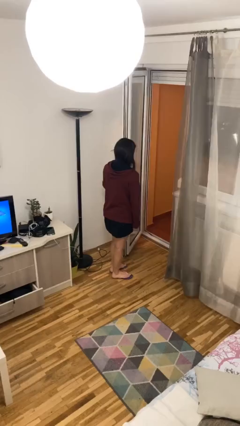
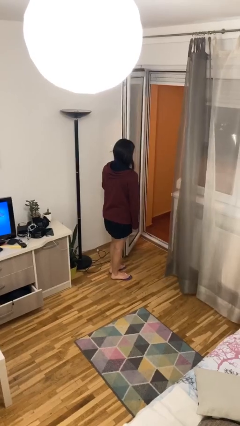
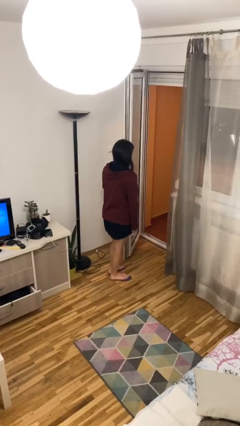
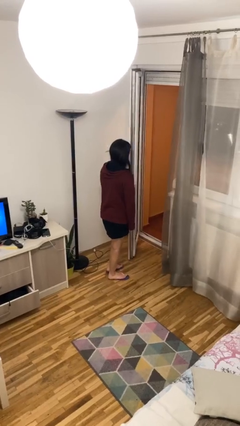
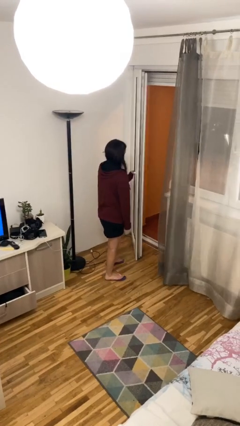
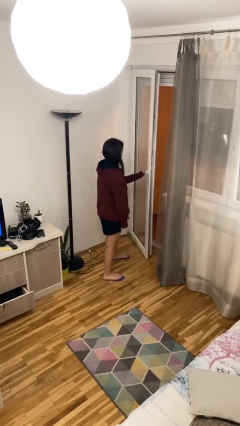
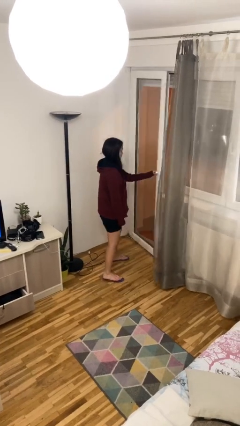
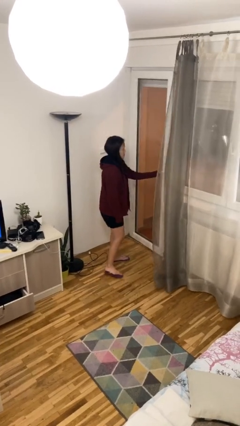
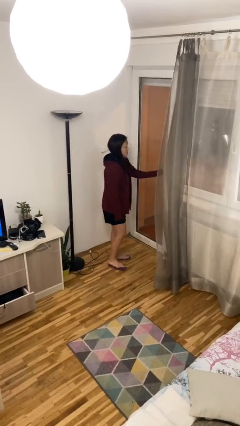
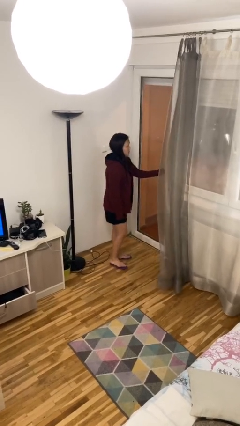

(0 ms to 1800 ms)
person closes facility door

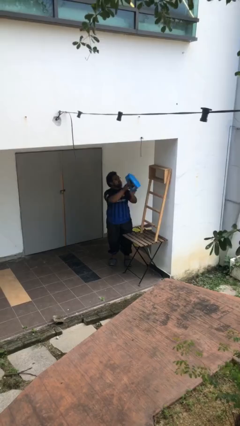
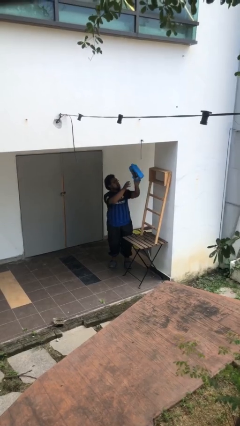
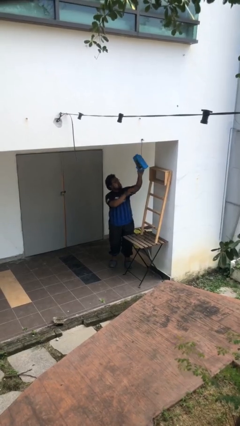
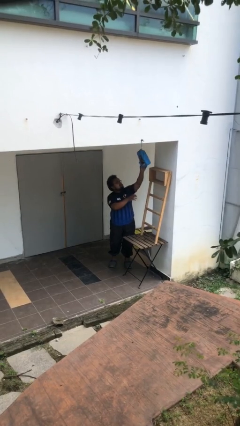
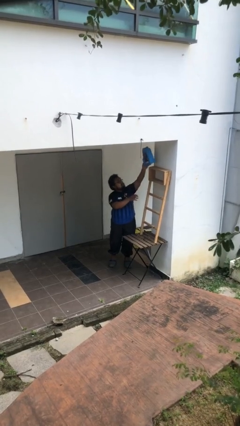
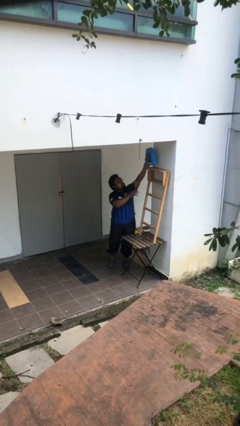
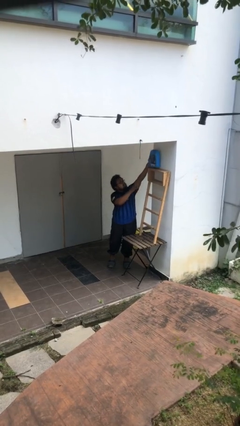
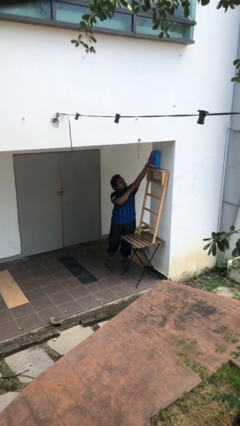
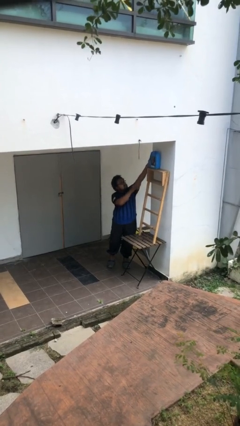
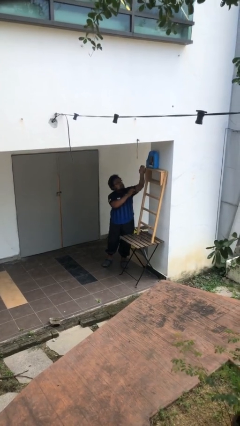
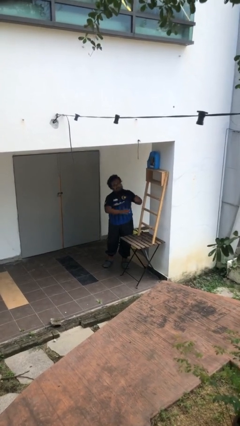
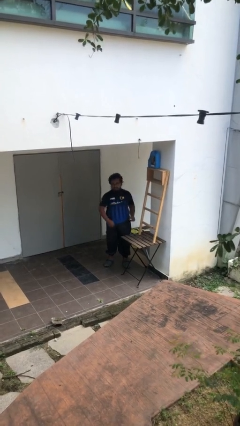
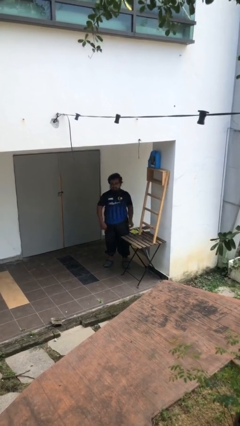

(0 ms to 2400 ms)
person puts down object on shelf

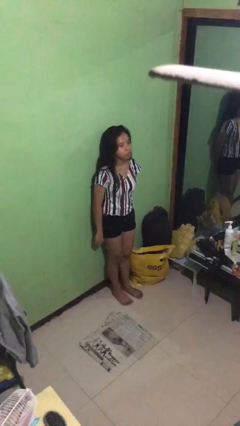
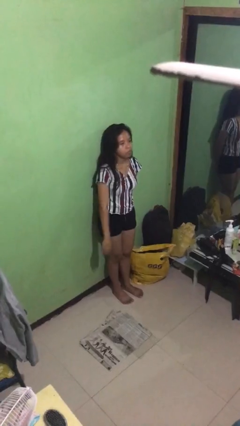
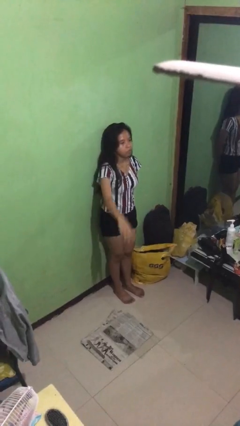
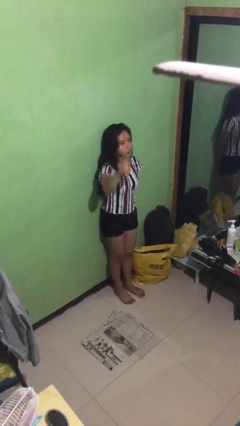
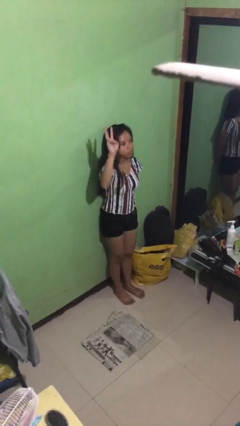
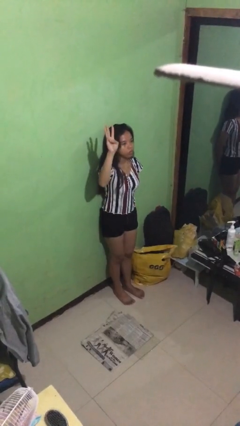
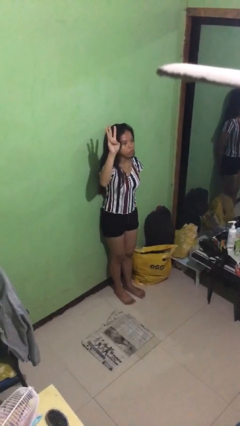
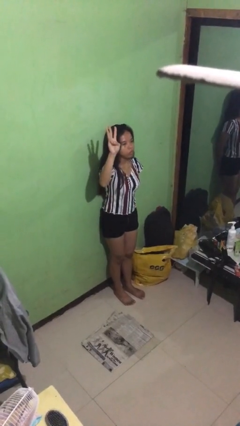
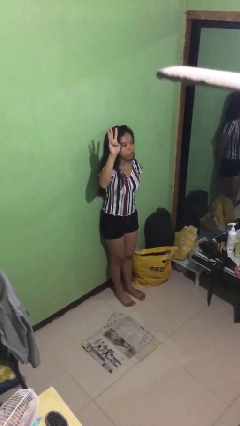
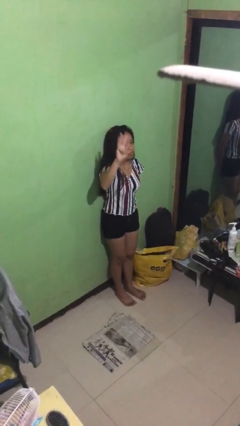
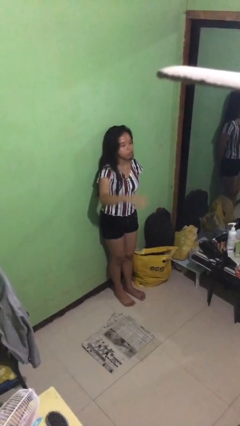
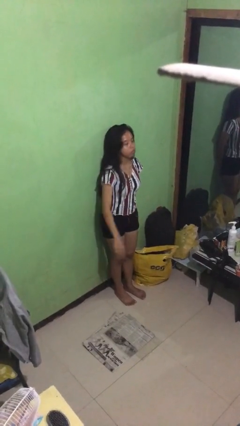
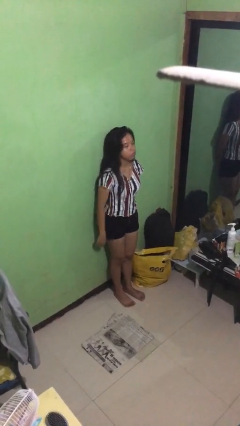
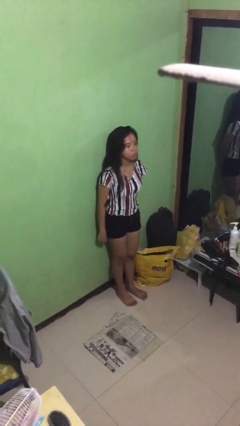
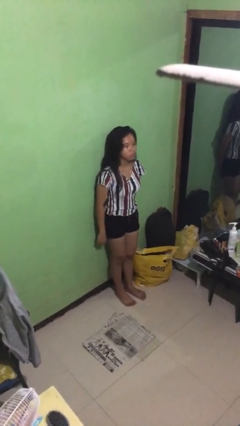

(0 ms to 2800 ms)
person gestures number three

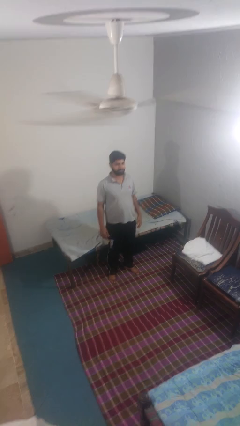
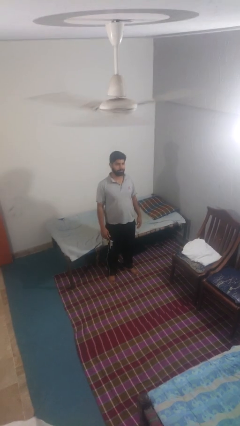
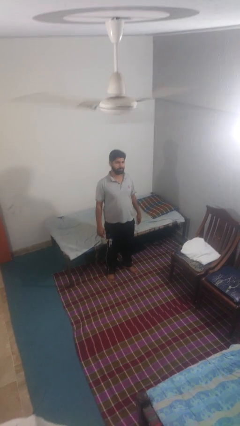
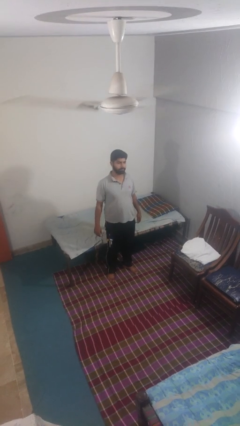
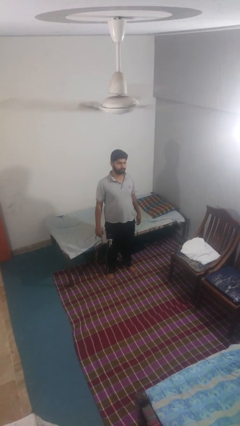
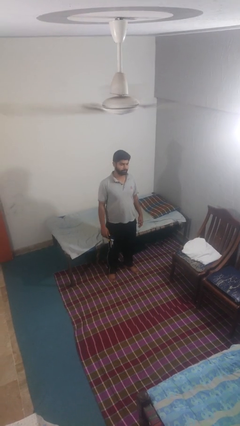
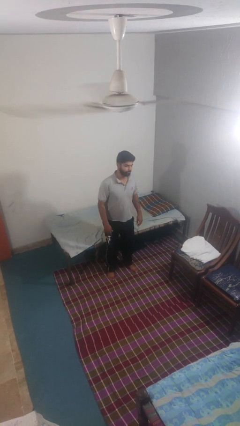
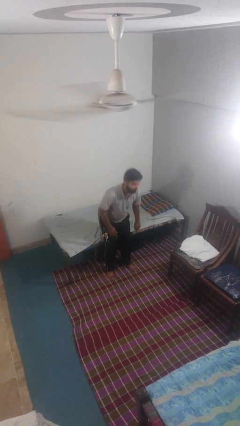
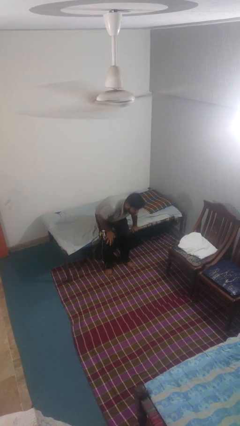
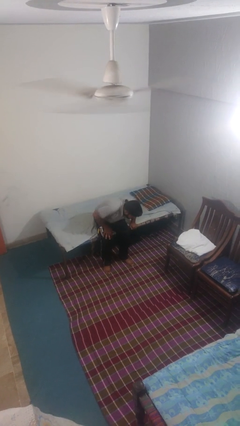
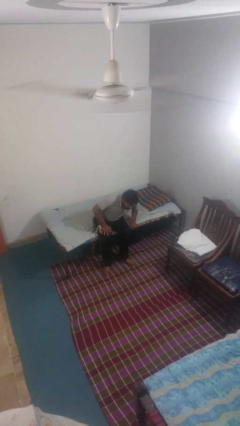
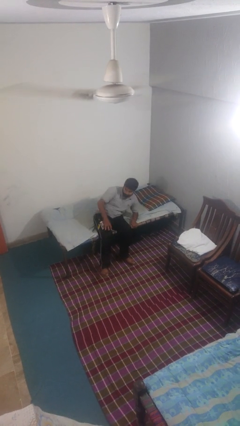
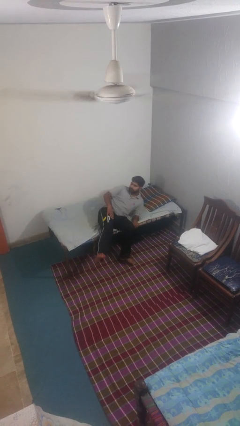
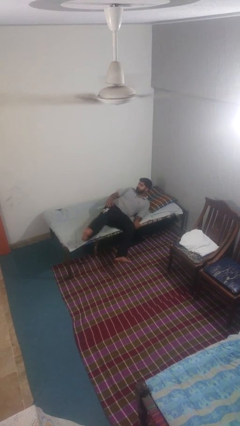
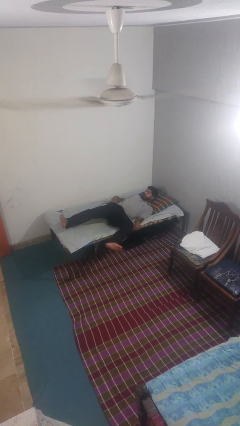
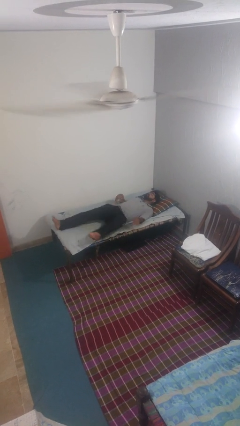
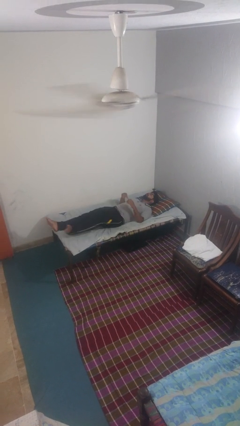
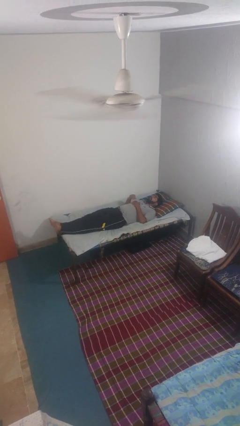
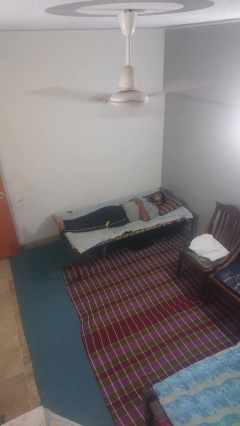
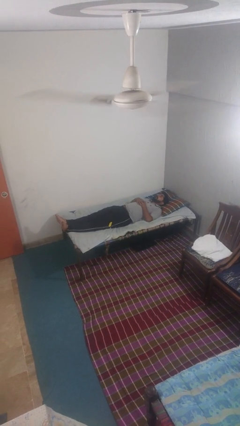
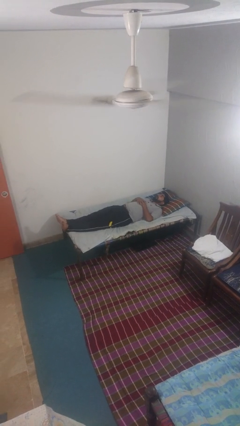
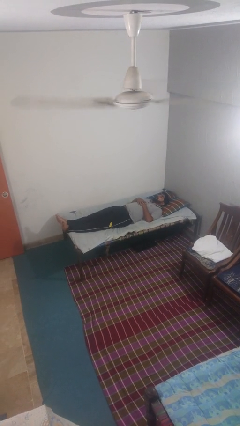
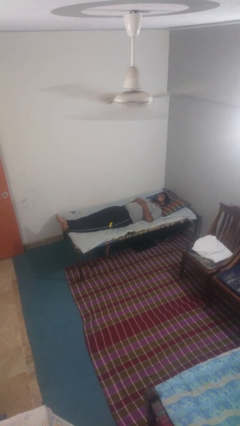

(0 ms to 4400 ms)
person lies down on bed

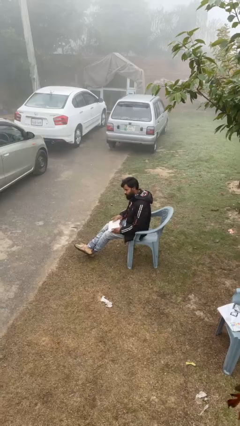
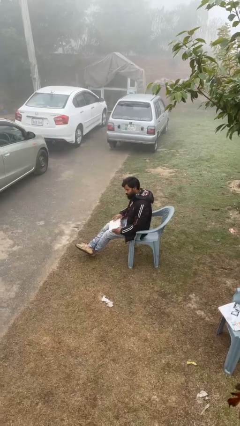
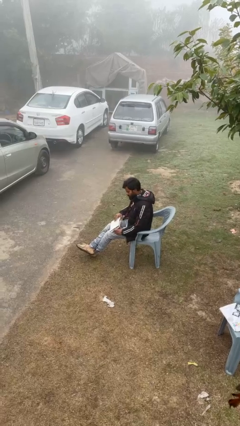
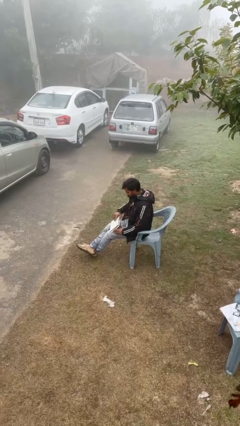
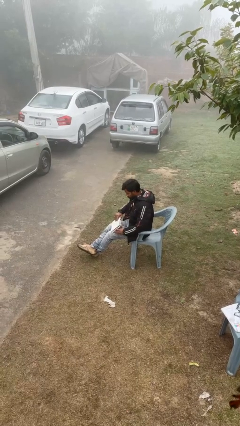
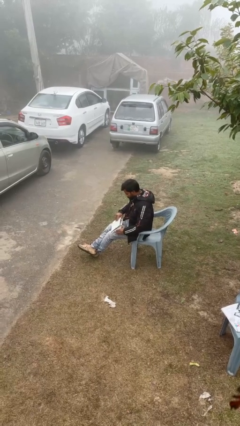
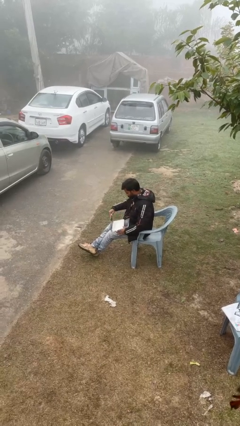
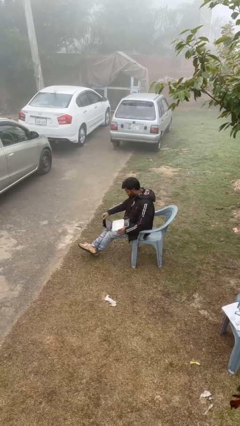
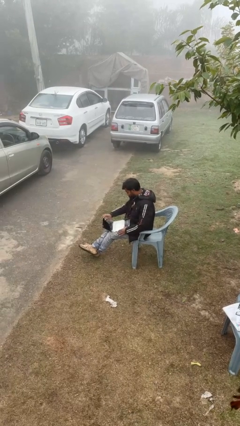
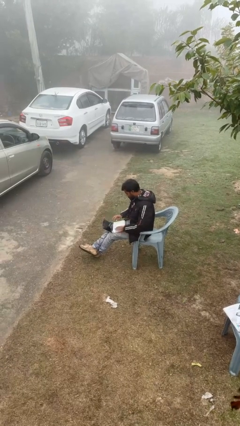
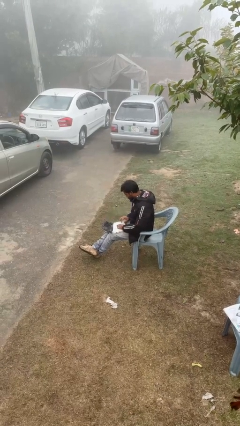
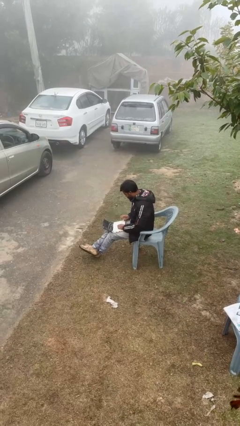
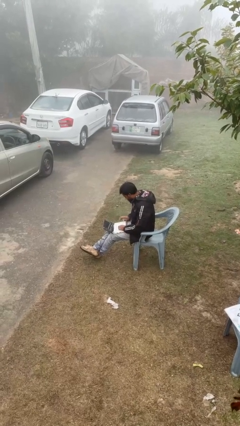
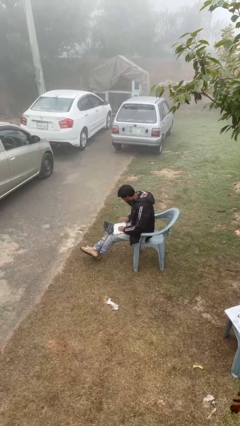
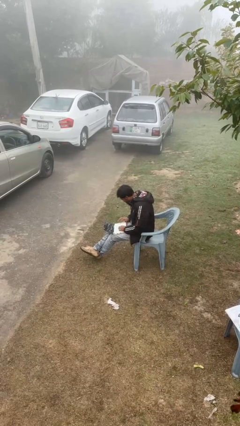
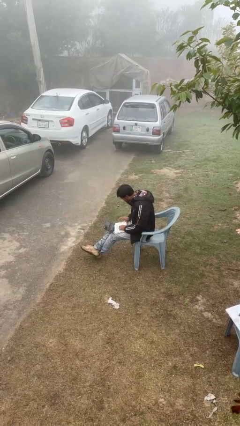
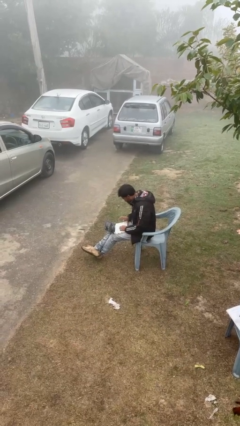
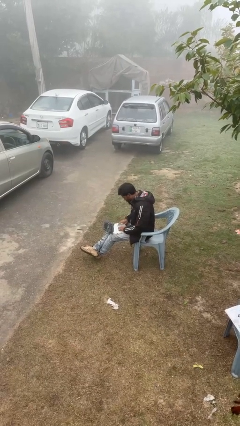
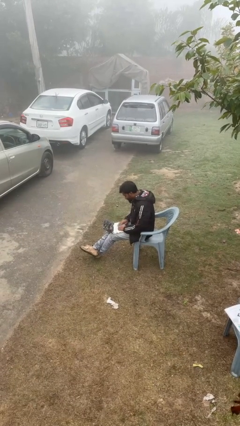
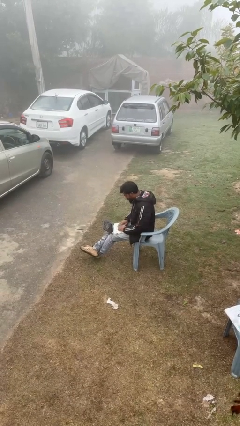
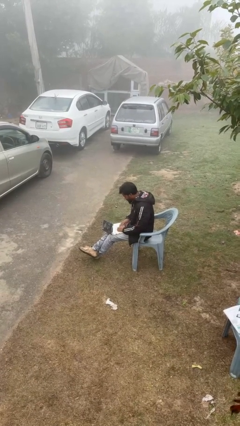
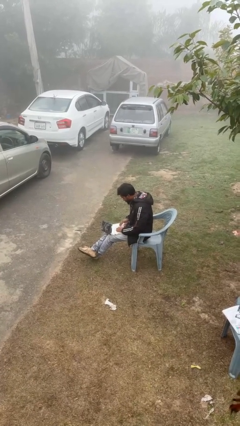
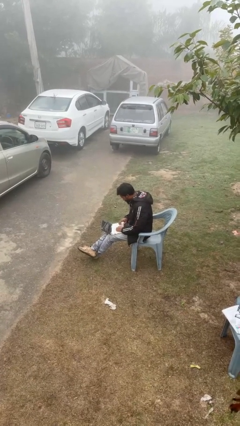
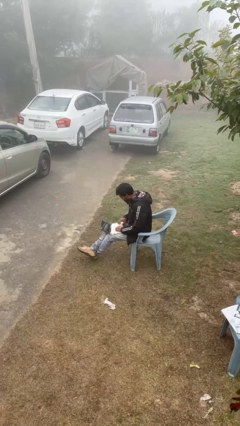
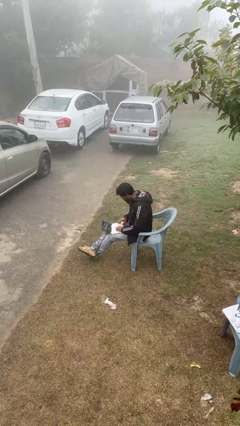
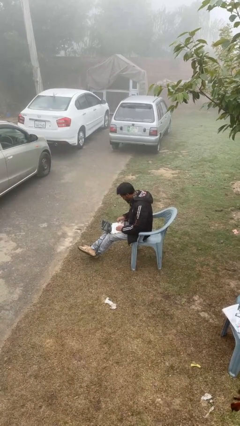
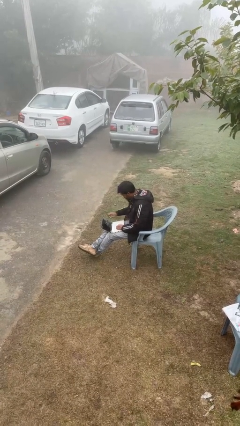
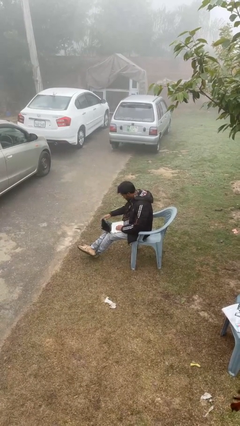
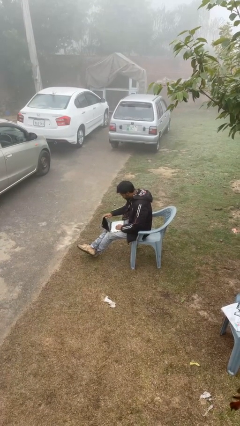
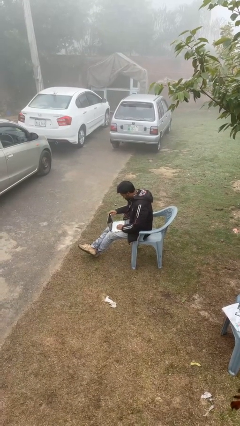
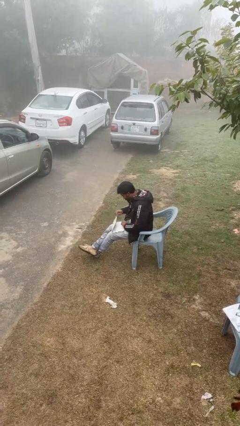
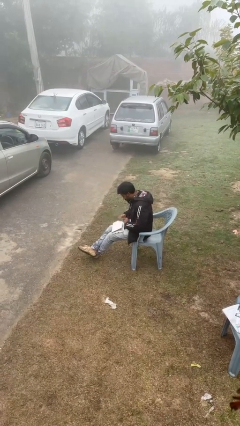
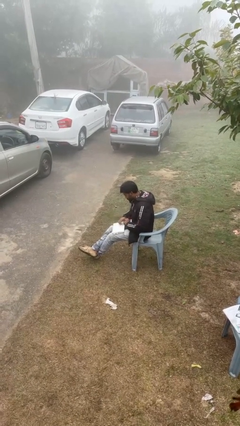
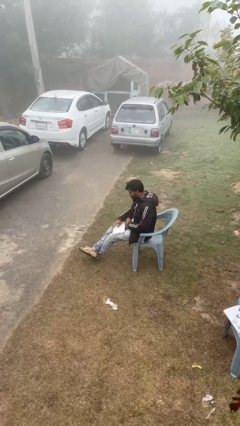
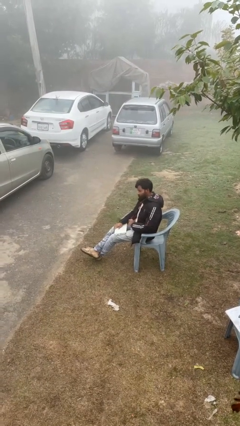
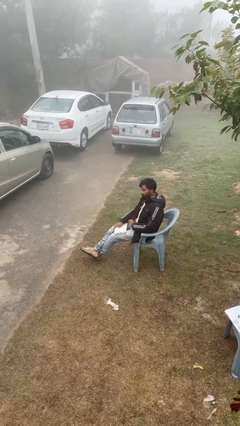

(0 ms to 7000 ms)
person interacts with laptop
